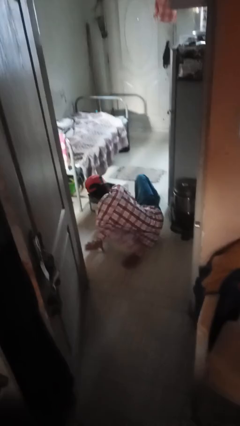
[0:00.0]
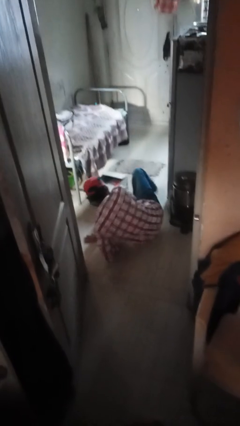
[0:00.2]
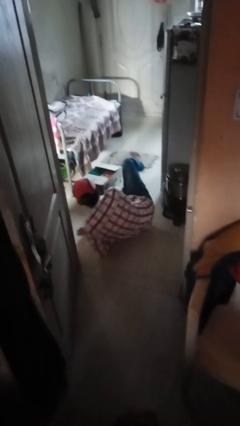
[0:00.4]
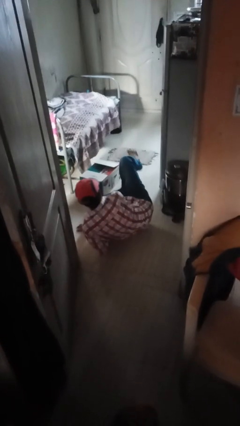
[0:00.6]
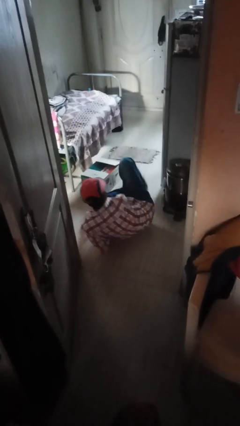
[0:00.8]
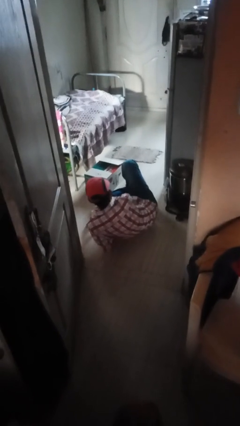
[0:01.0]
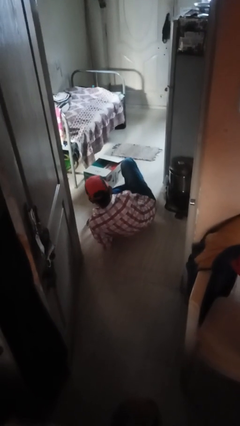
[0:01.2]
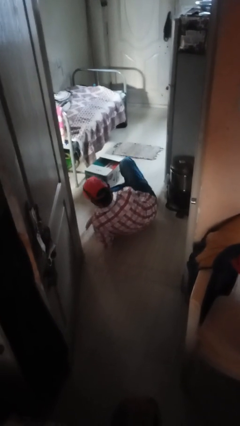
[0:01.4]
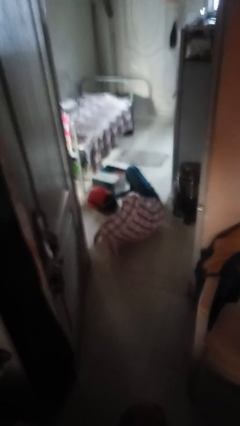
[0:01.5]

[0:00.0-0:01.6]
person lies down on floor

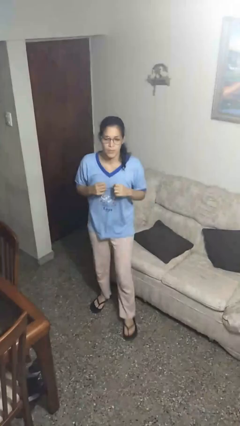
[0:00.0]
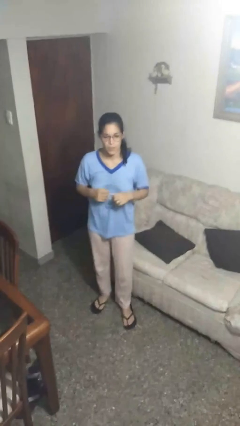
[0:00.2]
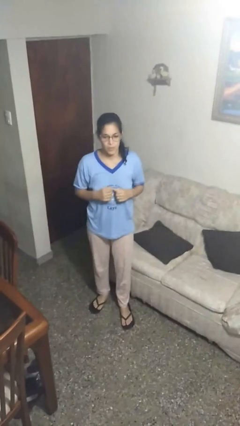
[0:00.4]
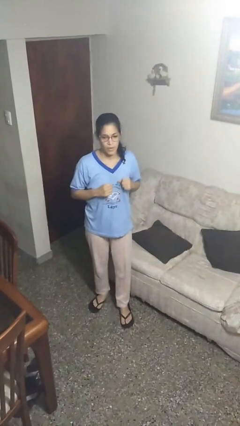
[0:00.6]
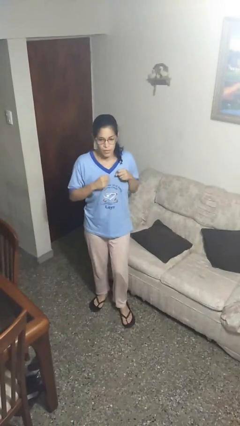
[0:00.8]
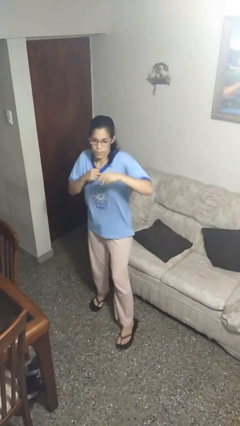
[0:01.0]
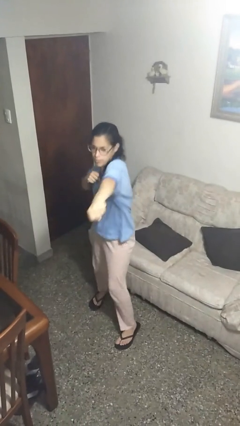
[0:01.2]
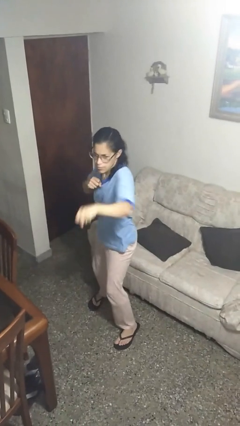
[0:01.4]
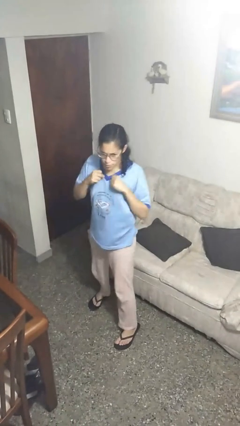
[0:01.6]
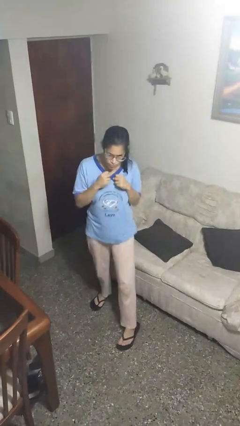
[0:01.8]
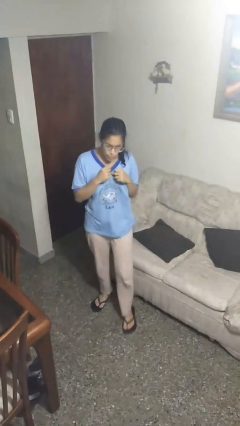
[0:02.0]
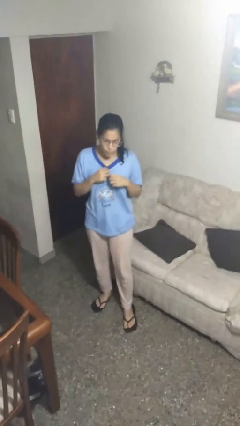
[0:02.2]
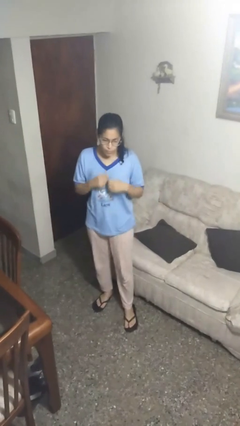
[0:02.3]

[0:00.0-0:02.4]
person karate chop

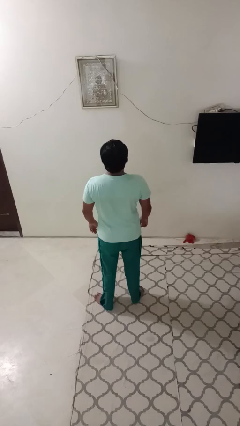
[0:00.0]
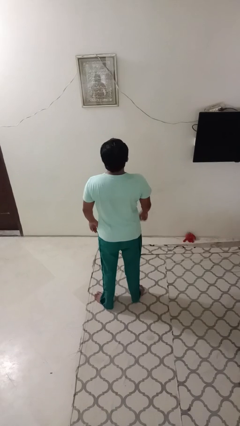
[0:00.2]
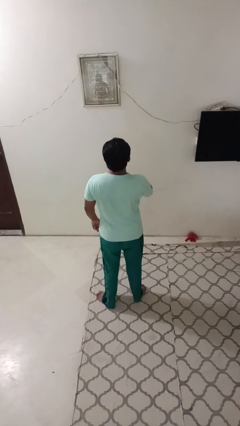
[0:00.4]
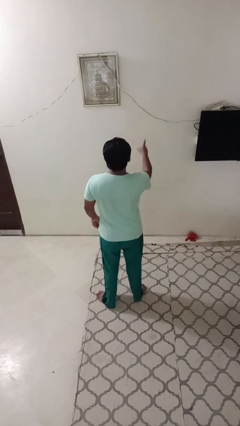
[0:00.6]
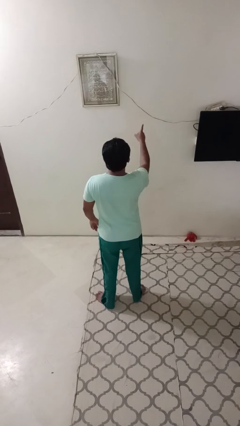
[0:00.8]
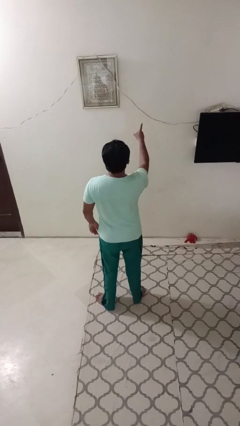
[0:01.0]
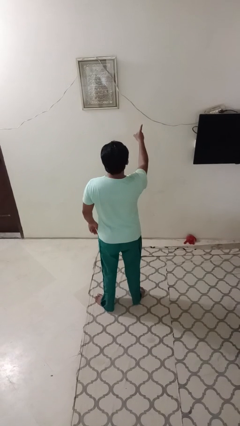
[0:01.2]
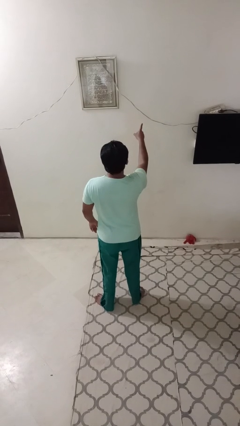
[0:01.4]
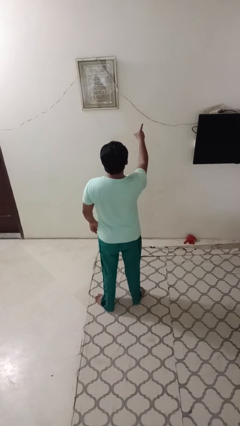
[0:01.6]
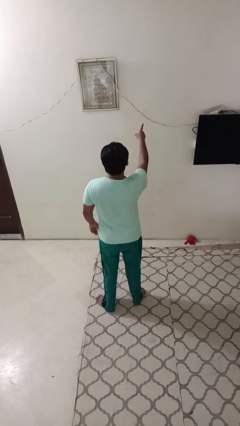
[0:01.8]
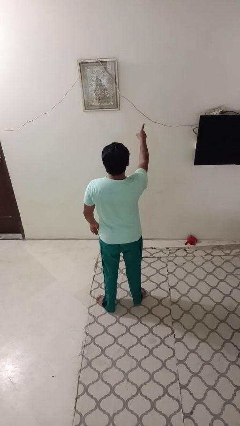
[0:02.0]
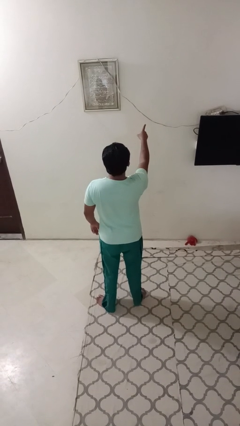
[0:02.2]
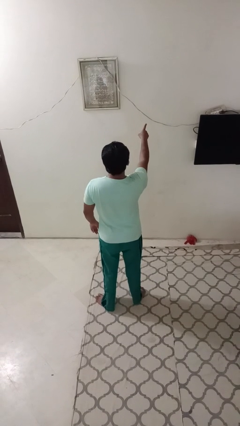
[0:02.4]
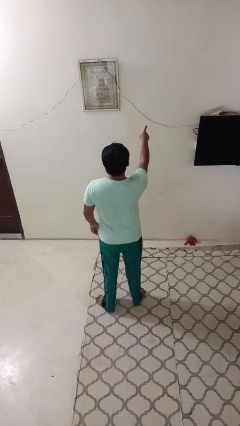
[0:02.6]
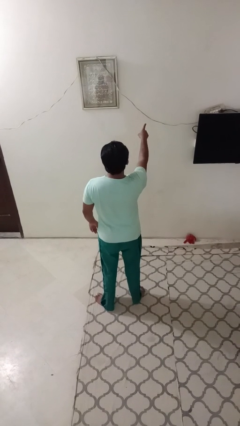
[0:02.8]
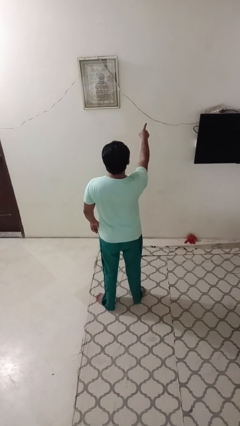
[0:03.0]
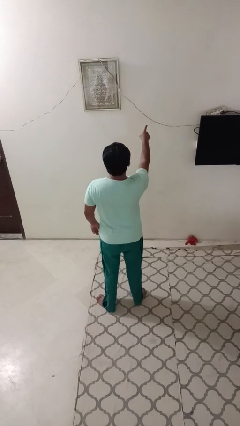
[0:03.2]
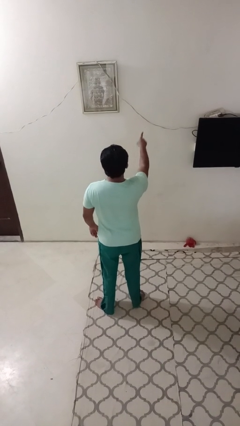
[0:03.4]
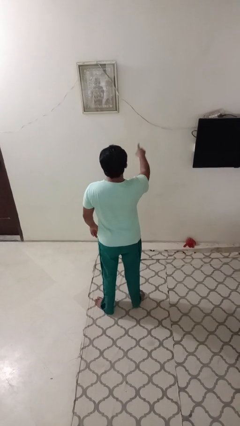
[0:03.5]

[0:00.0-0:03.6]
person points at person

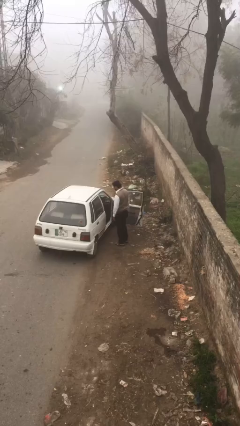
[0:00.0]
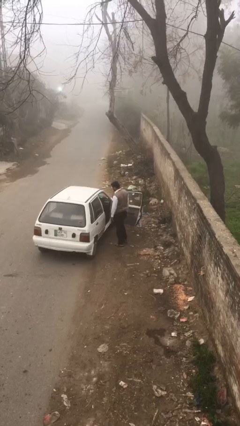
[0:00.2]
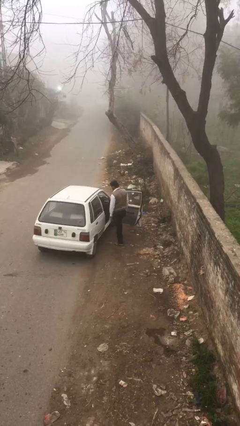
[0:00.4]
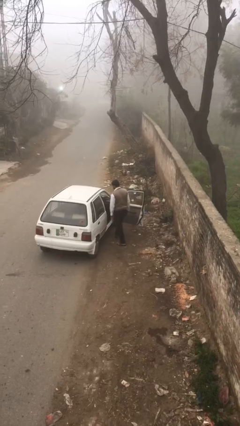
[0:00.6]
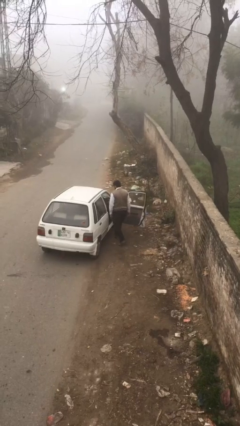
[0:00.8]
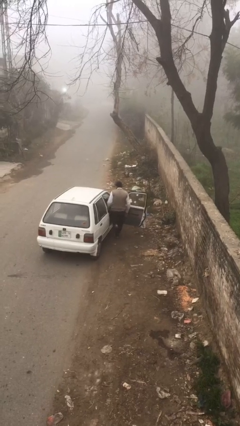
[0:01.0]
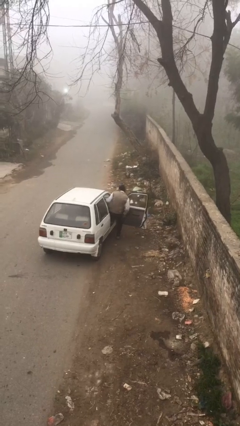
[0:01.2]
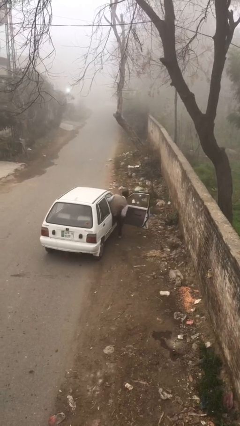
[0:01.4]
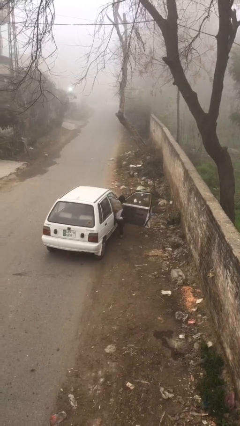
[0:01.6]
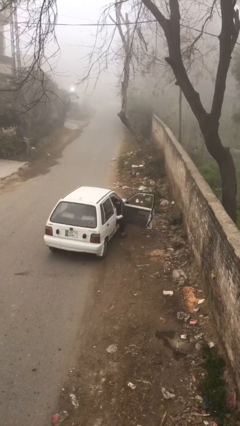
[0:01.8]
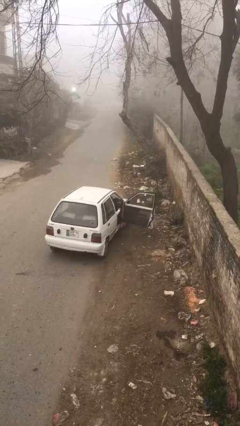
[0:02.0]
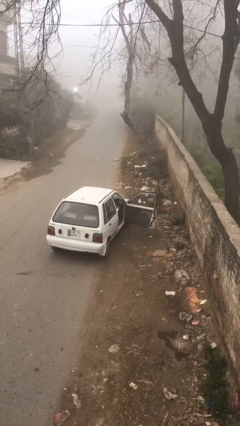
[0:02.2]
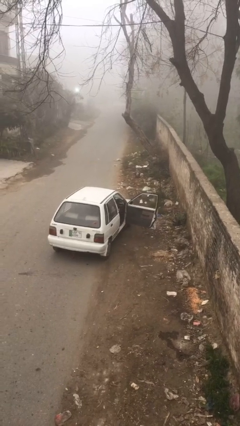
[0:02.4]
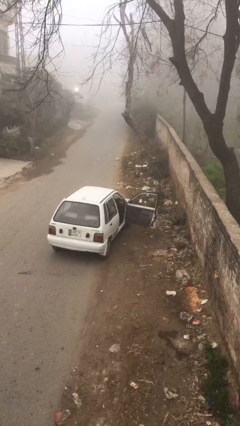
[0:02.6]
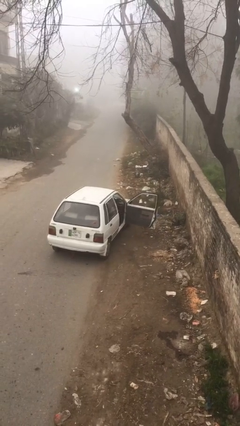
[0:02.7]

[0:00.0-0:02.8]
person enters car

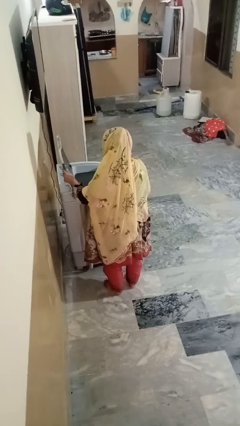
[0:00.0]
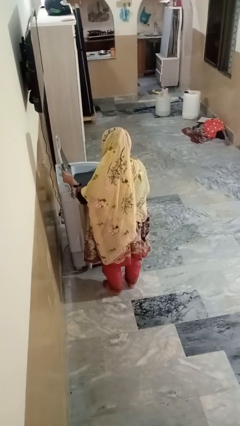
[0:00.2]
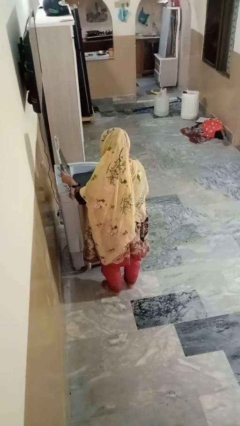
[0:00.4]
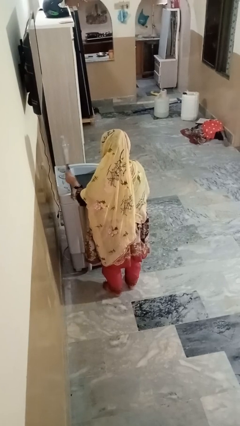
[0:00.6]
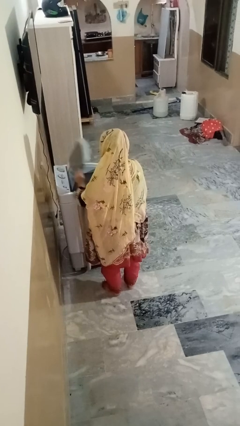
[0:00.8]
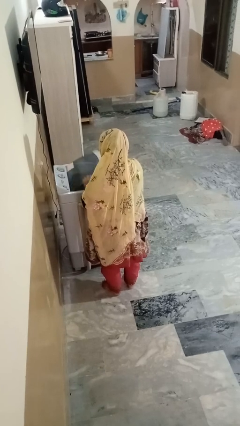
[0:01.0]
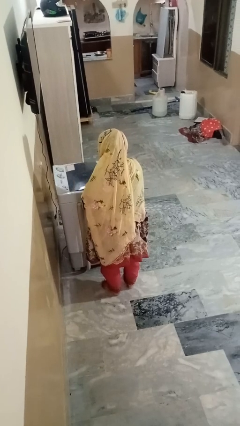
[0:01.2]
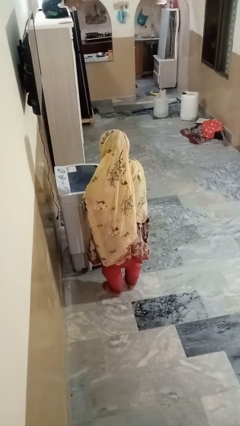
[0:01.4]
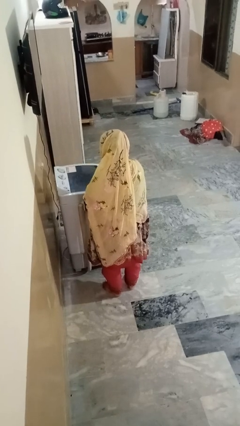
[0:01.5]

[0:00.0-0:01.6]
person closes clothes washer

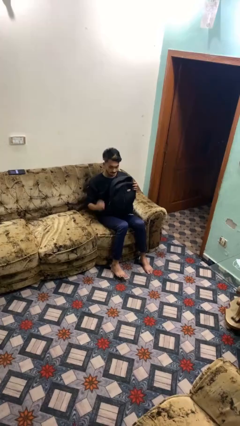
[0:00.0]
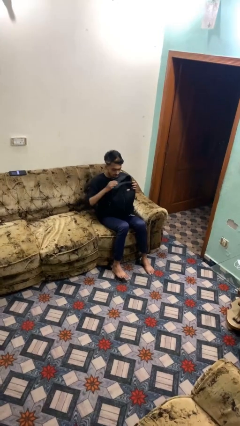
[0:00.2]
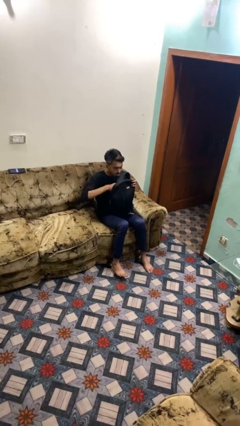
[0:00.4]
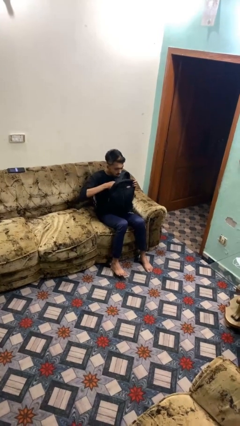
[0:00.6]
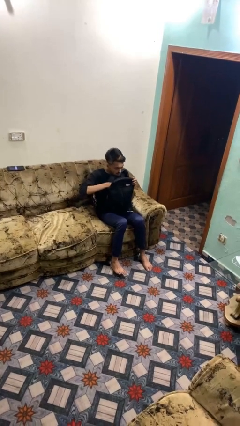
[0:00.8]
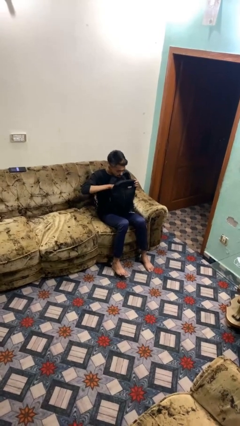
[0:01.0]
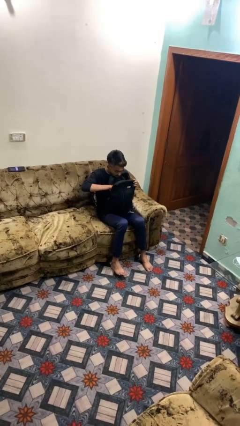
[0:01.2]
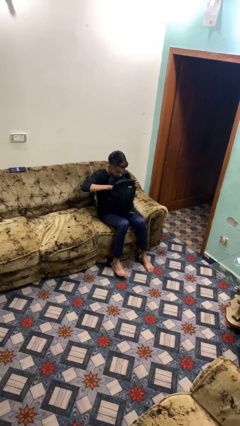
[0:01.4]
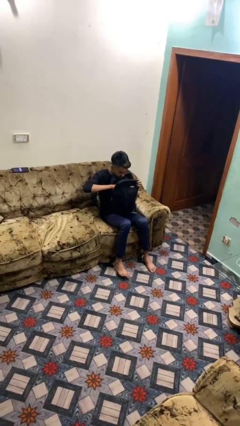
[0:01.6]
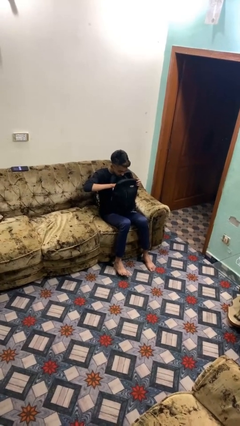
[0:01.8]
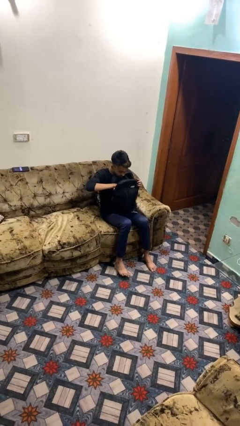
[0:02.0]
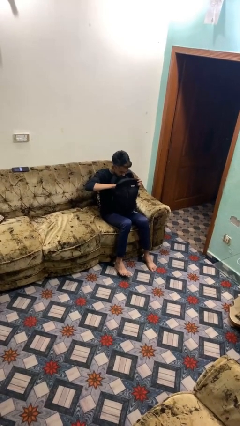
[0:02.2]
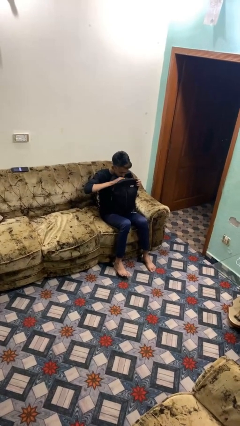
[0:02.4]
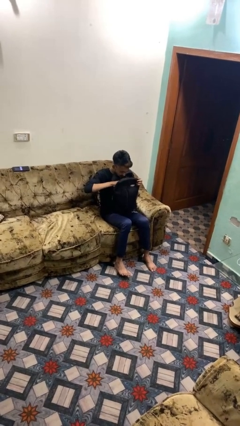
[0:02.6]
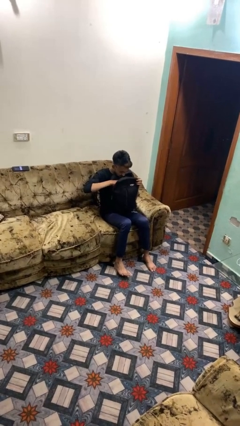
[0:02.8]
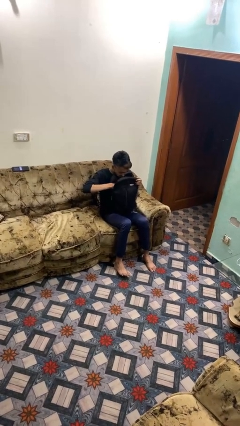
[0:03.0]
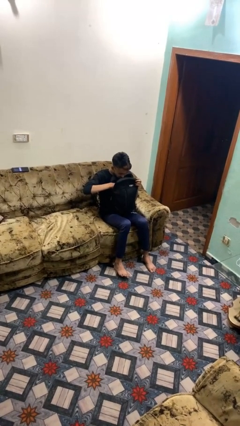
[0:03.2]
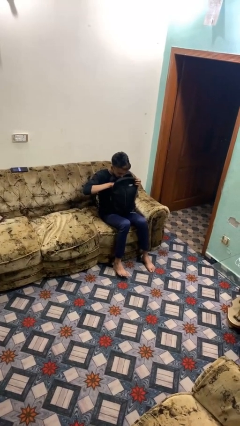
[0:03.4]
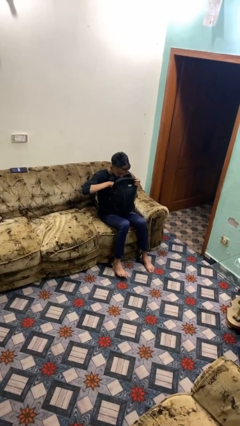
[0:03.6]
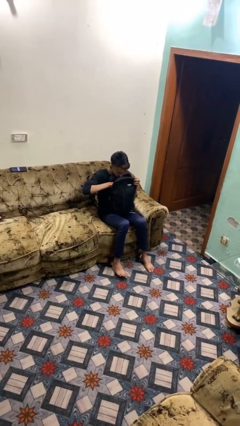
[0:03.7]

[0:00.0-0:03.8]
person searches in backpack

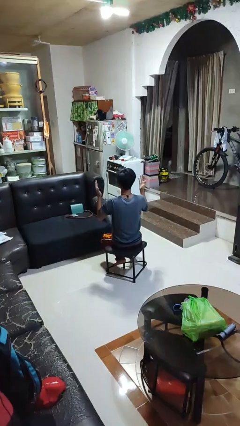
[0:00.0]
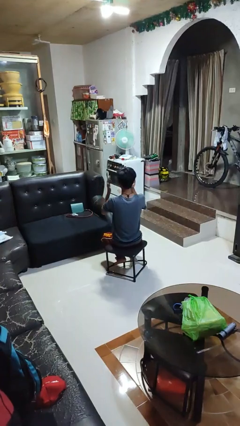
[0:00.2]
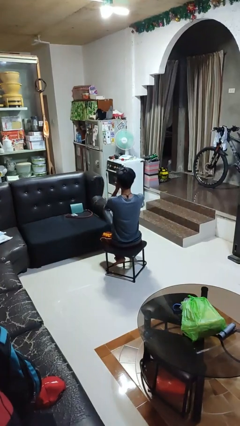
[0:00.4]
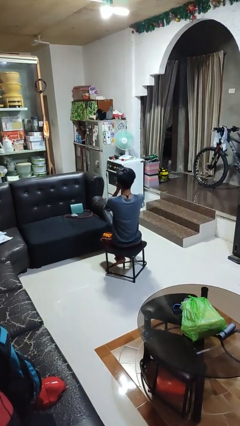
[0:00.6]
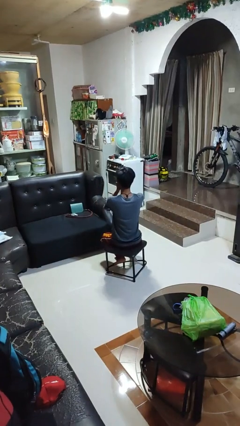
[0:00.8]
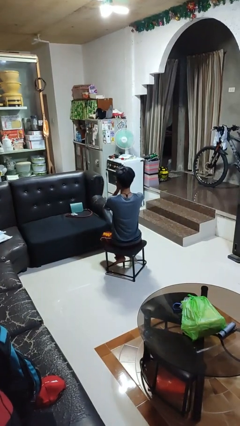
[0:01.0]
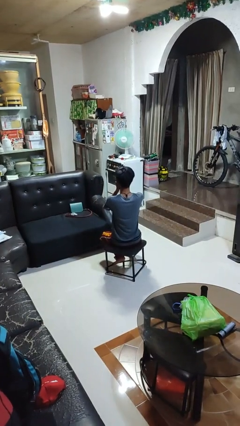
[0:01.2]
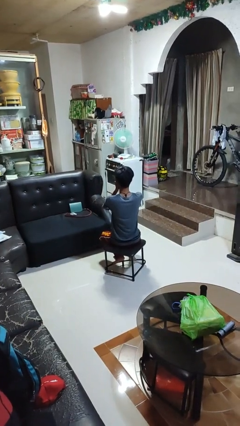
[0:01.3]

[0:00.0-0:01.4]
person covers face with hands

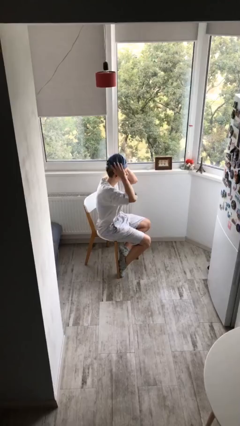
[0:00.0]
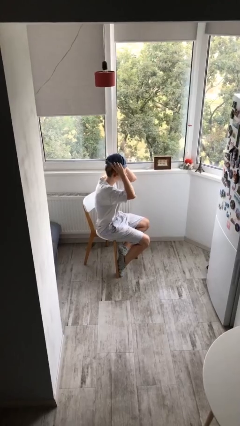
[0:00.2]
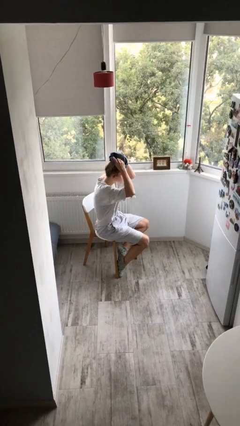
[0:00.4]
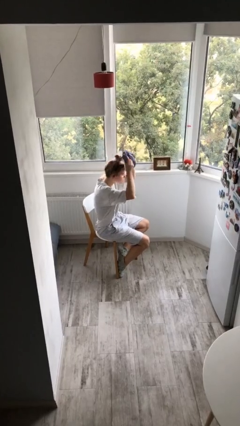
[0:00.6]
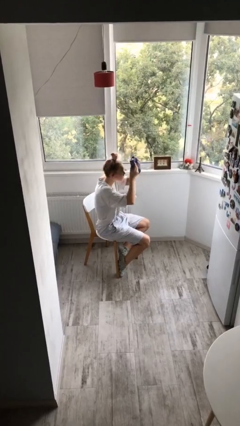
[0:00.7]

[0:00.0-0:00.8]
person takes off hat
